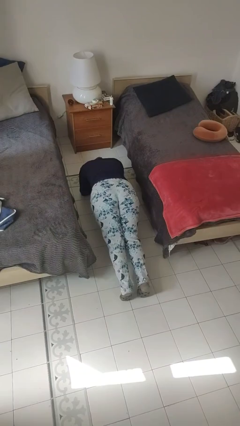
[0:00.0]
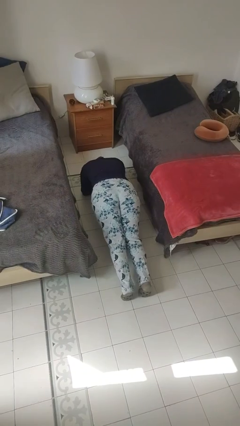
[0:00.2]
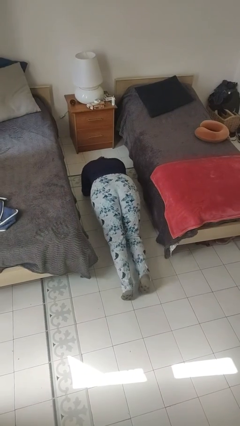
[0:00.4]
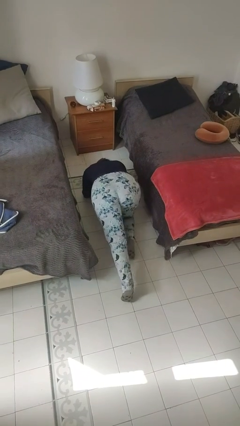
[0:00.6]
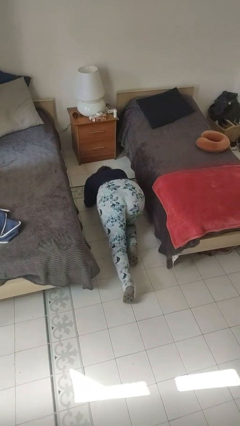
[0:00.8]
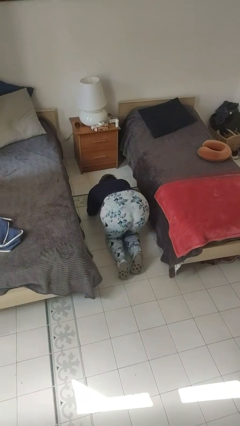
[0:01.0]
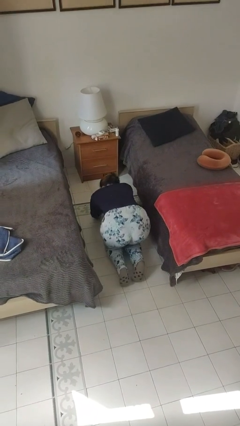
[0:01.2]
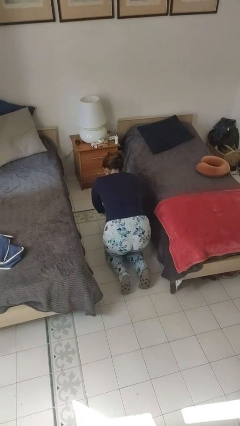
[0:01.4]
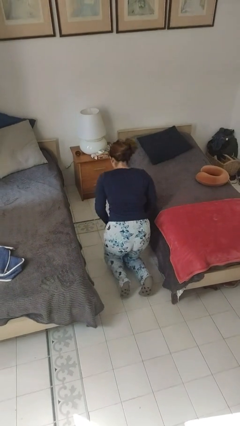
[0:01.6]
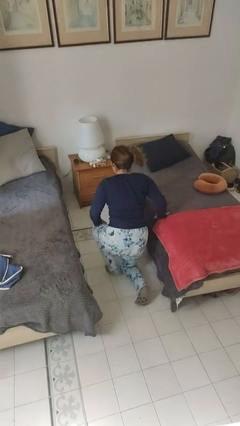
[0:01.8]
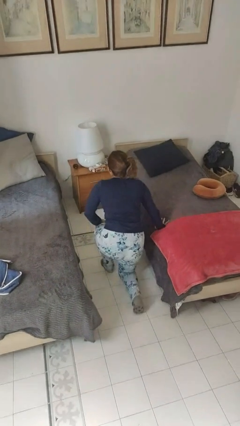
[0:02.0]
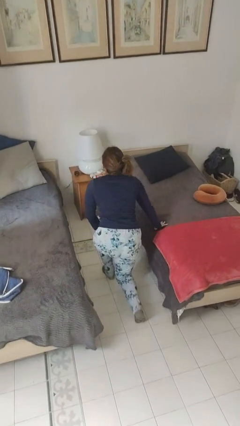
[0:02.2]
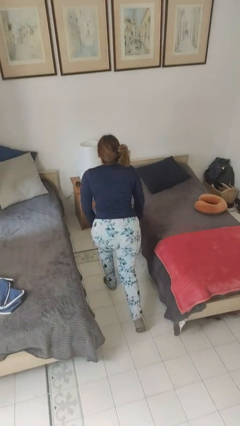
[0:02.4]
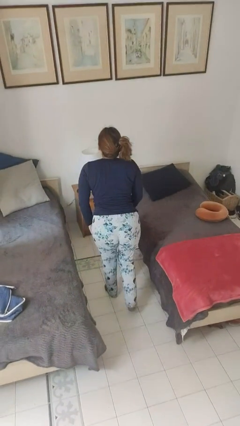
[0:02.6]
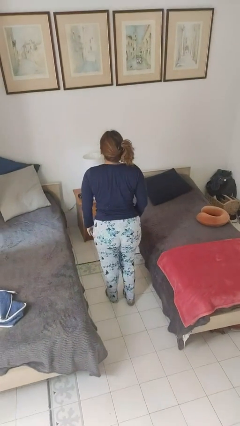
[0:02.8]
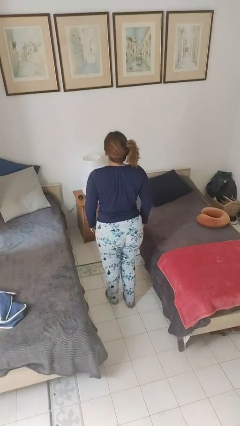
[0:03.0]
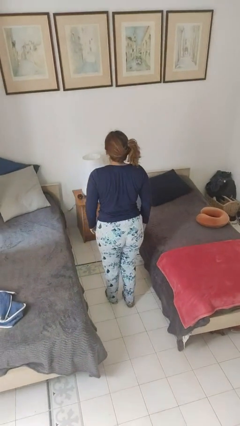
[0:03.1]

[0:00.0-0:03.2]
person stands up from floor

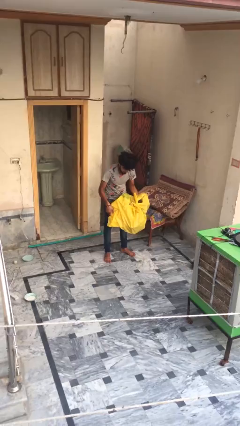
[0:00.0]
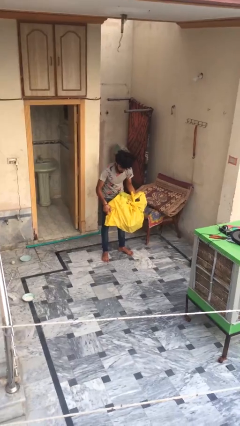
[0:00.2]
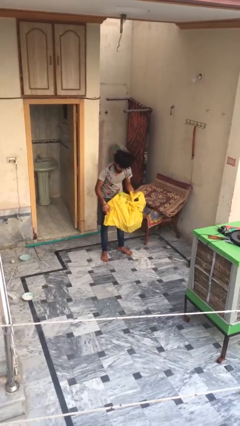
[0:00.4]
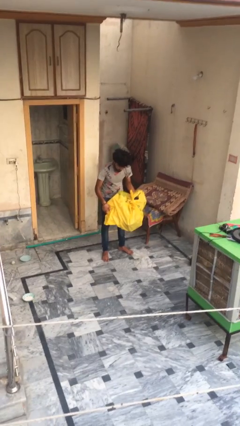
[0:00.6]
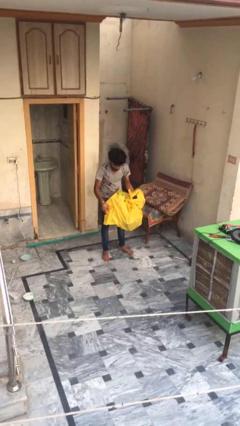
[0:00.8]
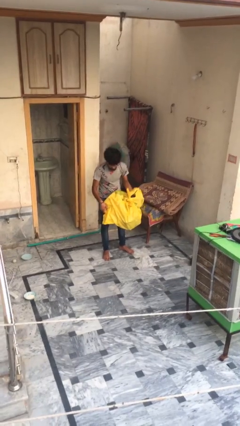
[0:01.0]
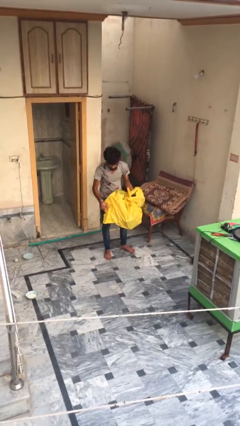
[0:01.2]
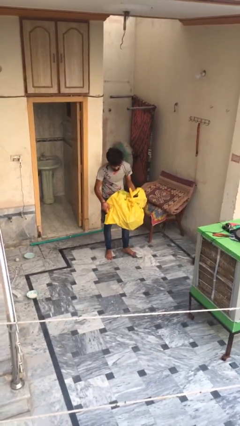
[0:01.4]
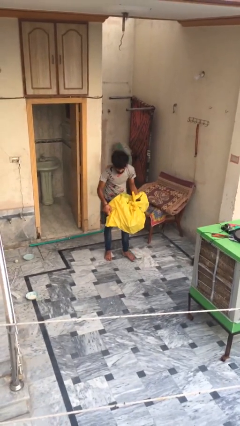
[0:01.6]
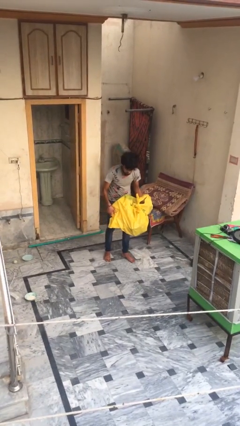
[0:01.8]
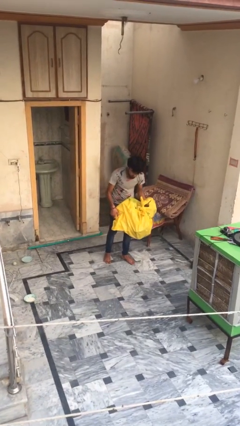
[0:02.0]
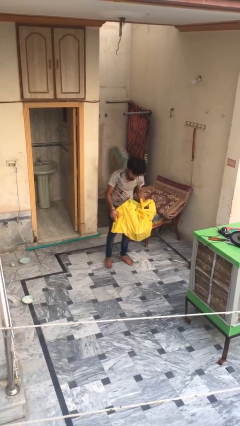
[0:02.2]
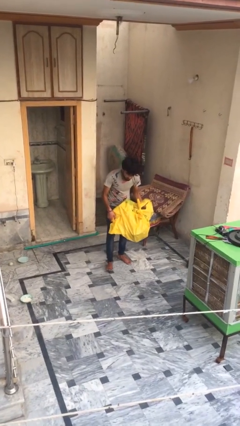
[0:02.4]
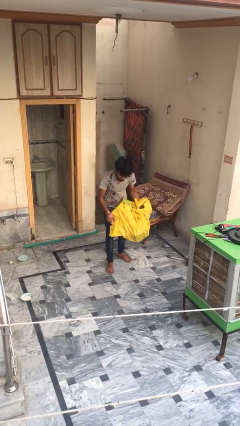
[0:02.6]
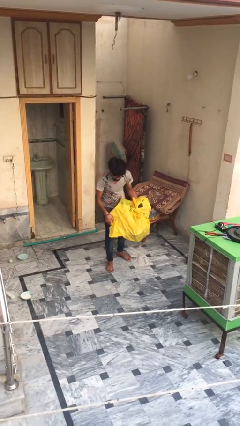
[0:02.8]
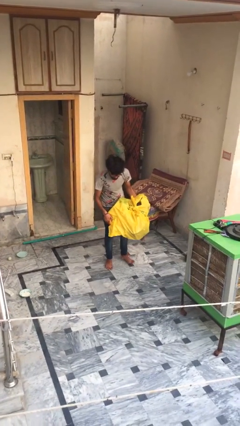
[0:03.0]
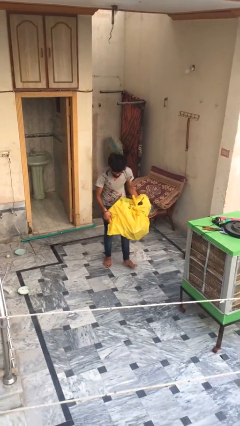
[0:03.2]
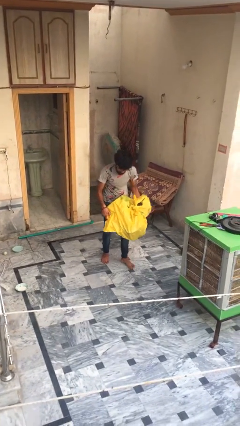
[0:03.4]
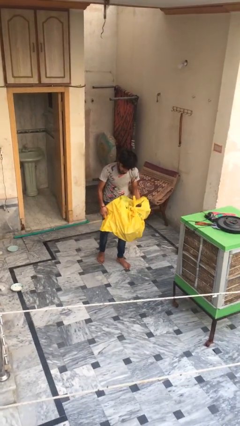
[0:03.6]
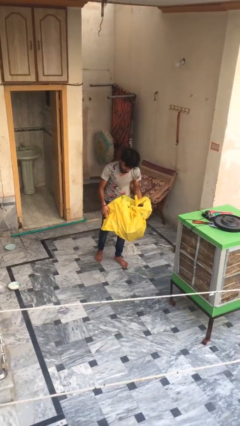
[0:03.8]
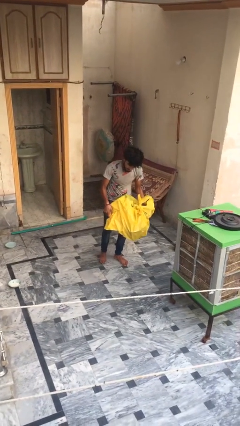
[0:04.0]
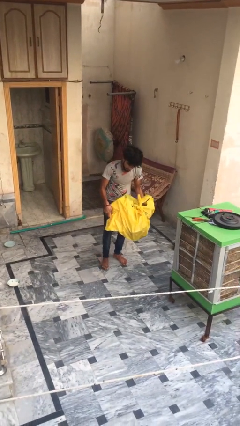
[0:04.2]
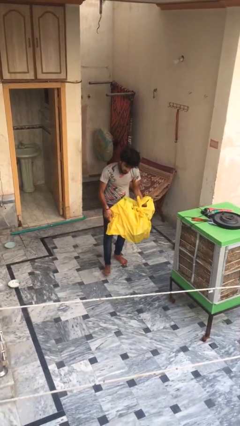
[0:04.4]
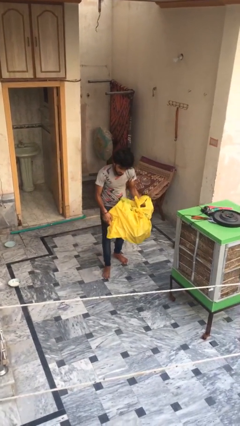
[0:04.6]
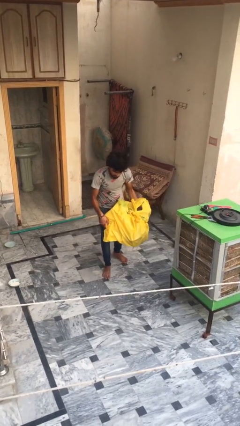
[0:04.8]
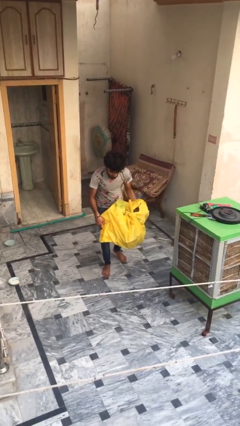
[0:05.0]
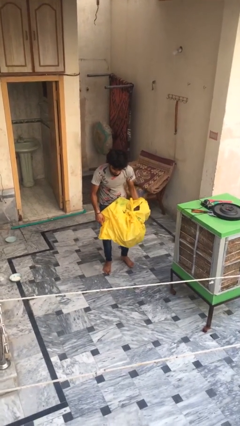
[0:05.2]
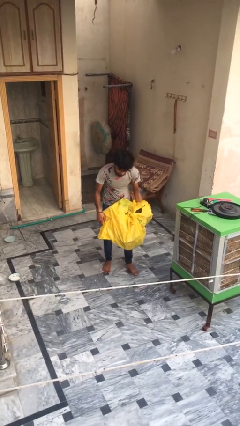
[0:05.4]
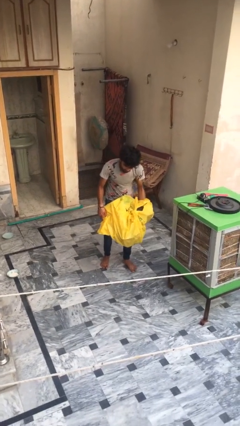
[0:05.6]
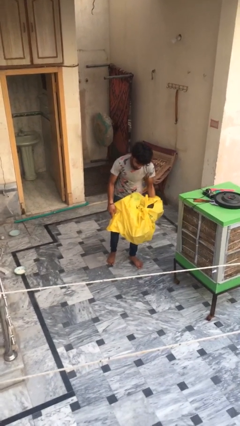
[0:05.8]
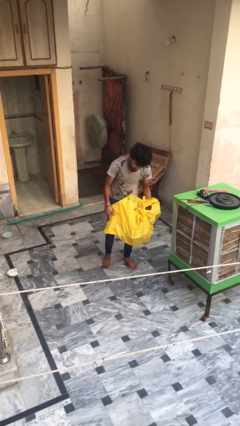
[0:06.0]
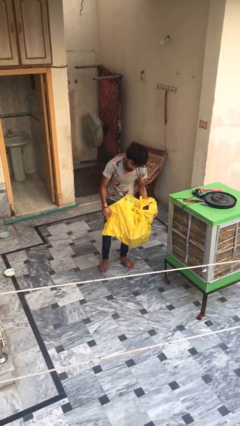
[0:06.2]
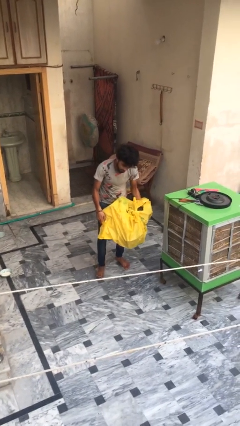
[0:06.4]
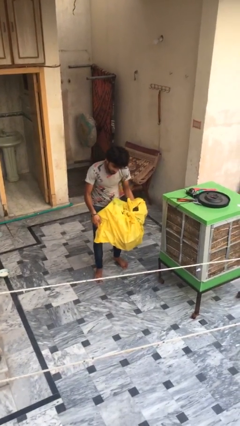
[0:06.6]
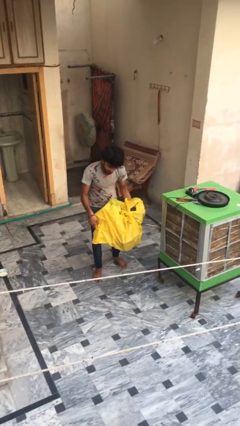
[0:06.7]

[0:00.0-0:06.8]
person carries heavy object

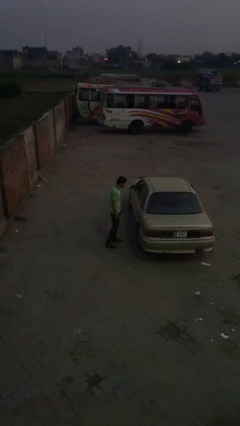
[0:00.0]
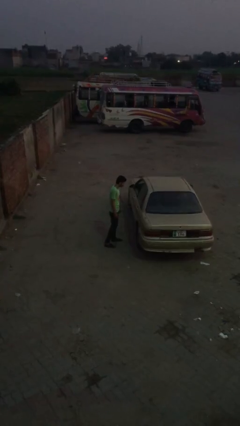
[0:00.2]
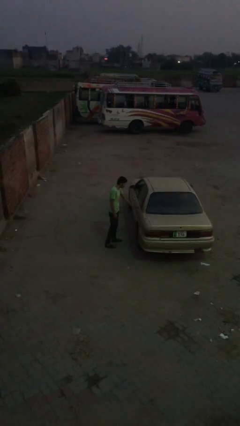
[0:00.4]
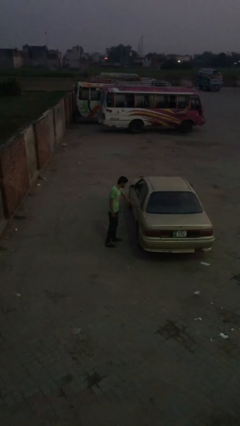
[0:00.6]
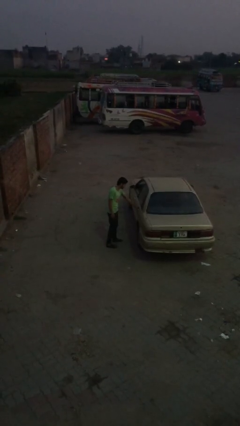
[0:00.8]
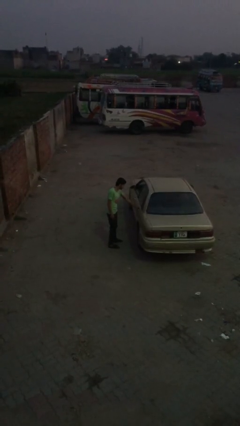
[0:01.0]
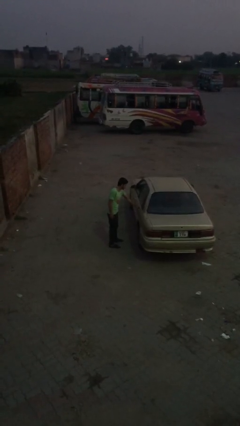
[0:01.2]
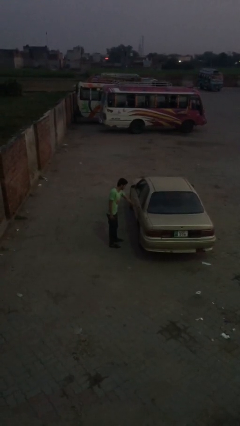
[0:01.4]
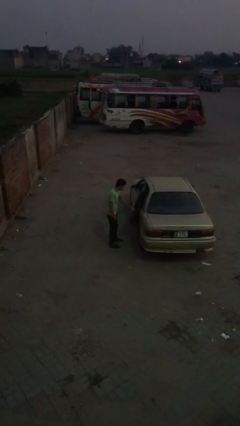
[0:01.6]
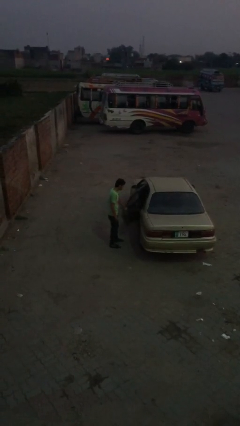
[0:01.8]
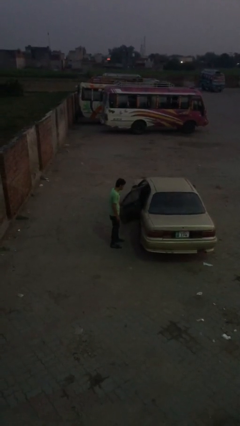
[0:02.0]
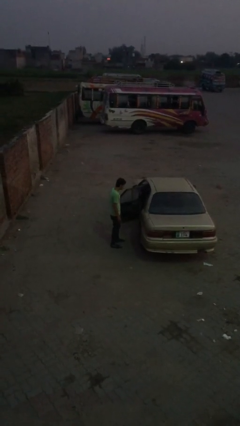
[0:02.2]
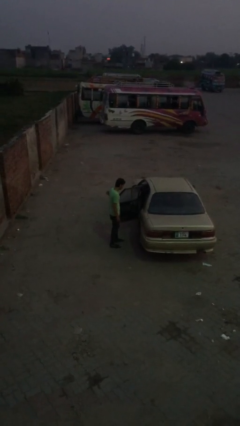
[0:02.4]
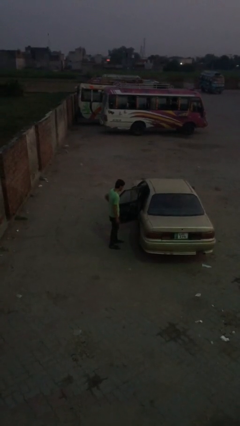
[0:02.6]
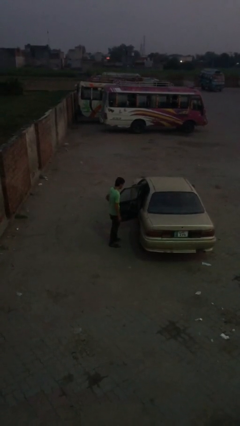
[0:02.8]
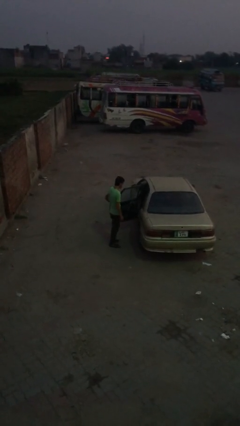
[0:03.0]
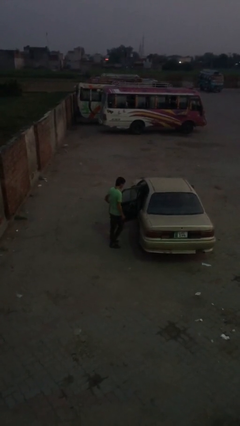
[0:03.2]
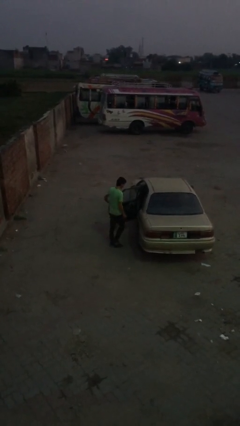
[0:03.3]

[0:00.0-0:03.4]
person opens car door

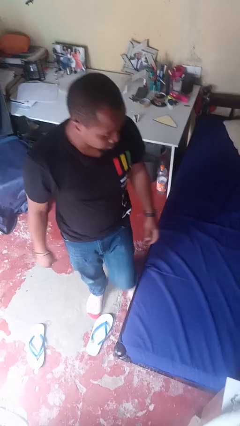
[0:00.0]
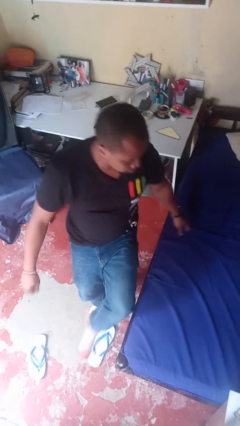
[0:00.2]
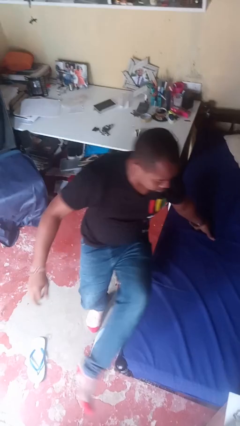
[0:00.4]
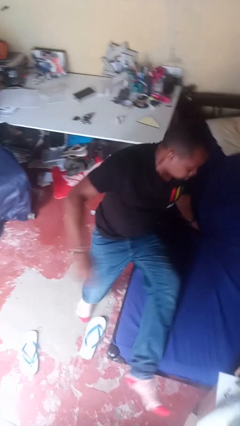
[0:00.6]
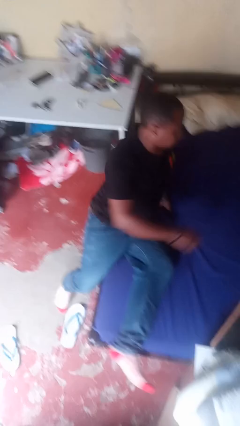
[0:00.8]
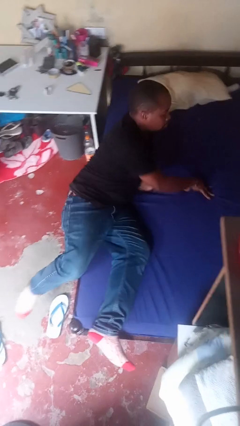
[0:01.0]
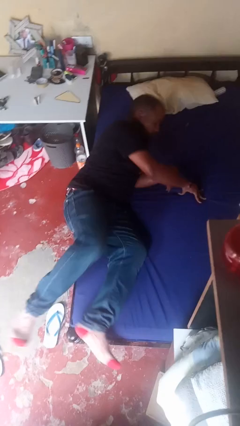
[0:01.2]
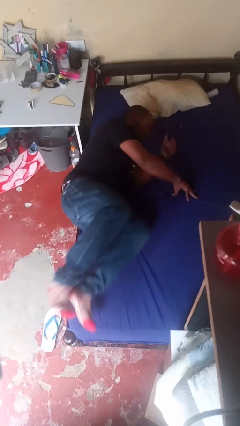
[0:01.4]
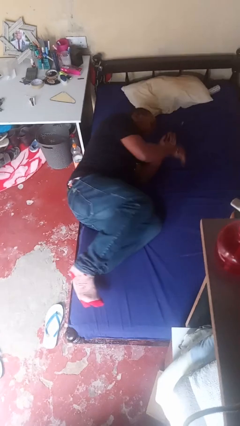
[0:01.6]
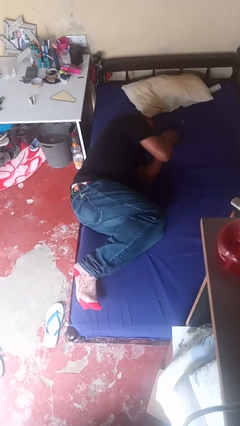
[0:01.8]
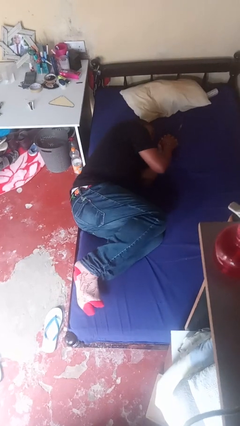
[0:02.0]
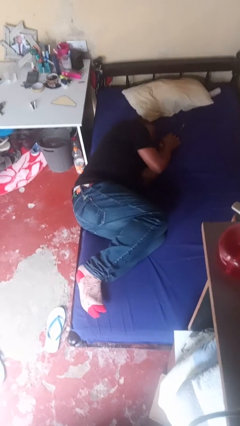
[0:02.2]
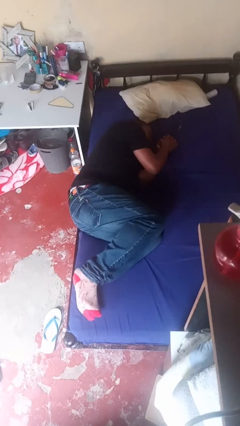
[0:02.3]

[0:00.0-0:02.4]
person lies down on bed

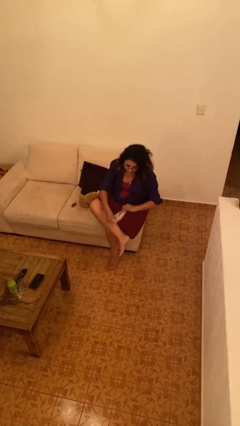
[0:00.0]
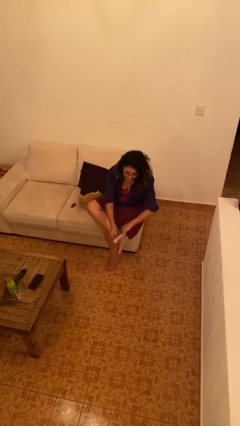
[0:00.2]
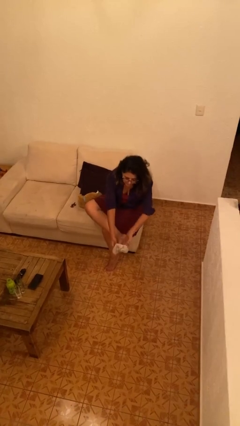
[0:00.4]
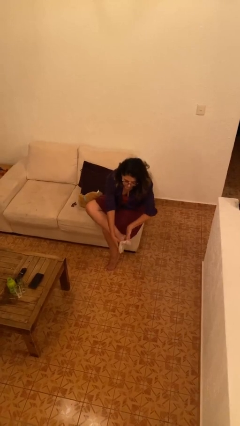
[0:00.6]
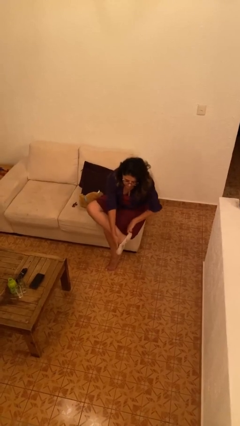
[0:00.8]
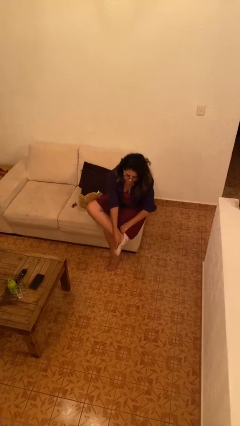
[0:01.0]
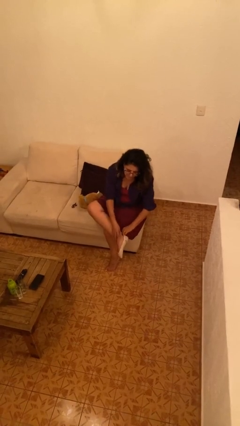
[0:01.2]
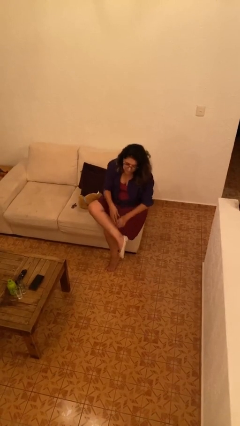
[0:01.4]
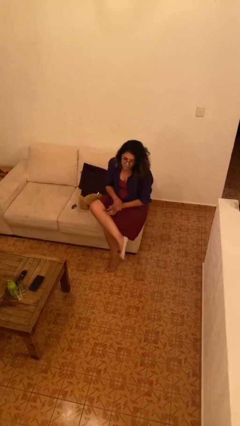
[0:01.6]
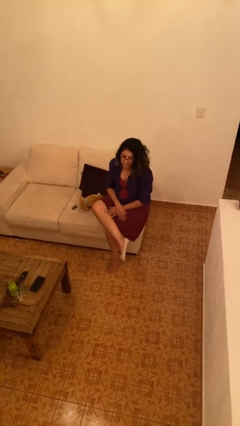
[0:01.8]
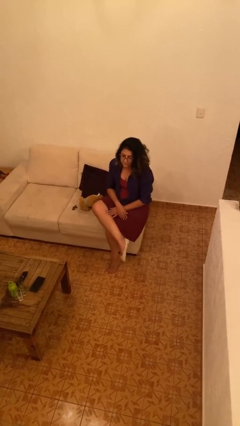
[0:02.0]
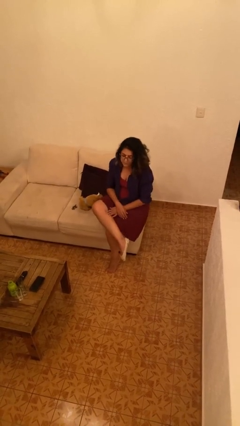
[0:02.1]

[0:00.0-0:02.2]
person puts on socks
